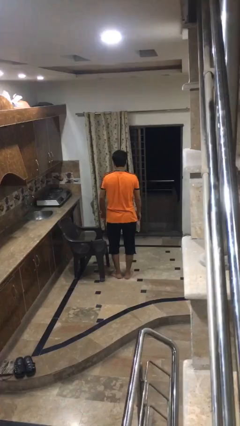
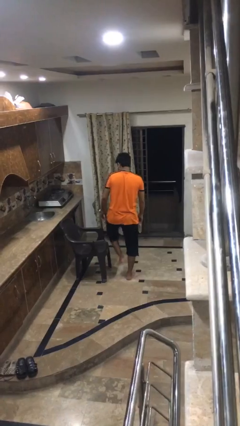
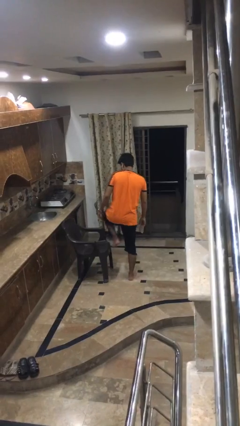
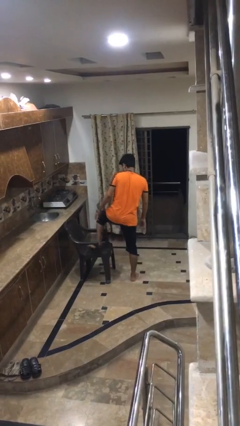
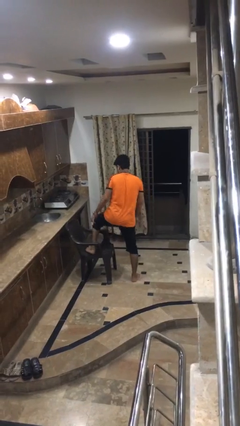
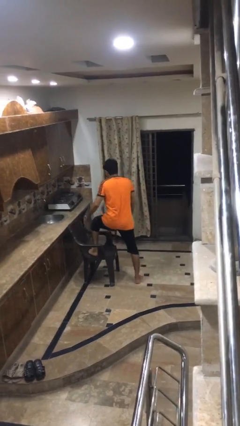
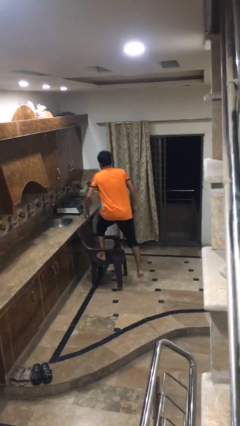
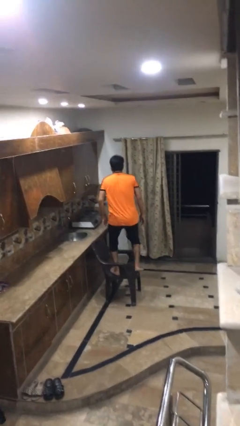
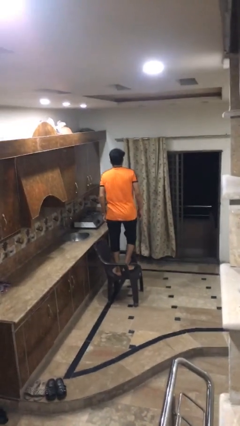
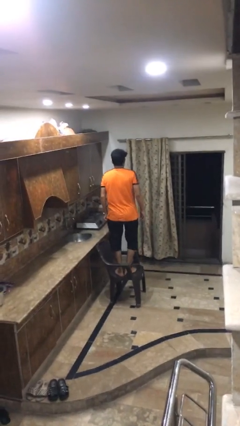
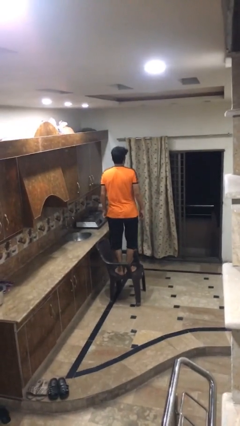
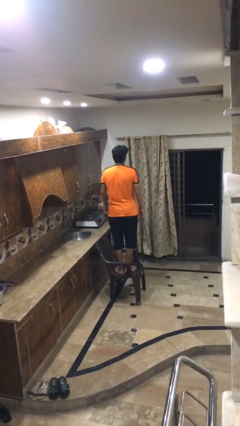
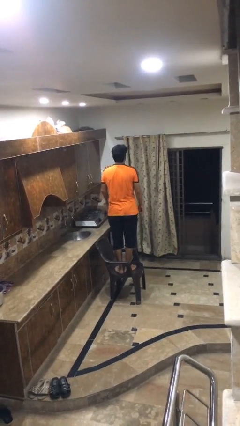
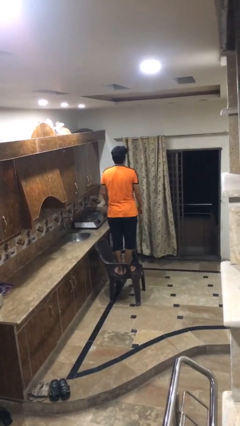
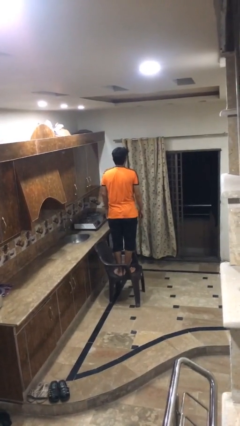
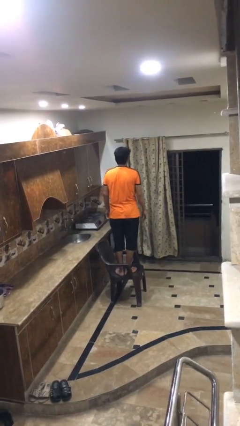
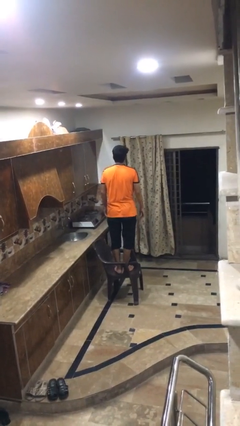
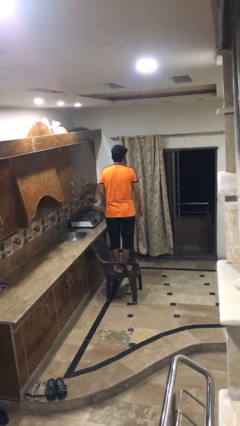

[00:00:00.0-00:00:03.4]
person climbs on chair

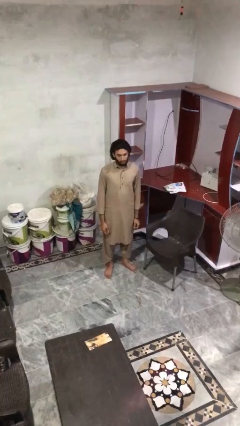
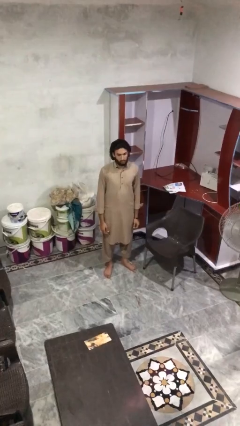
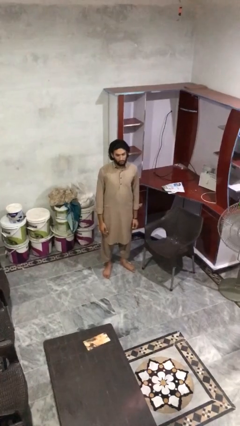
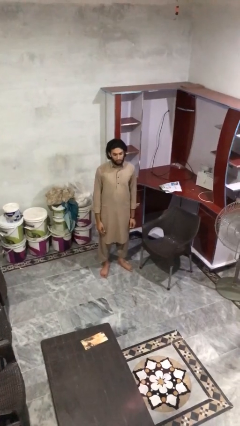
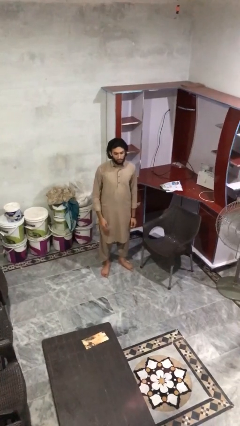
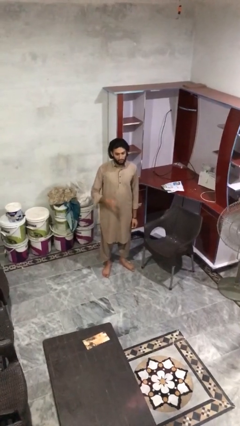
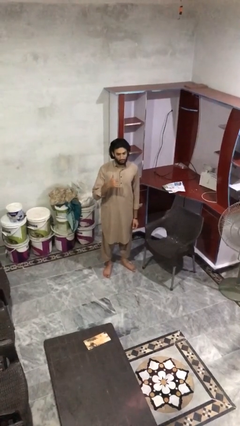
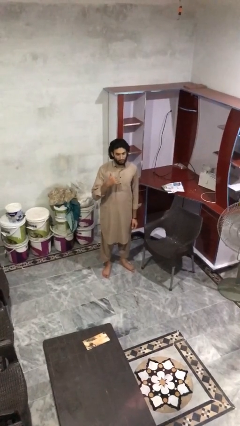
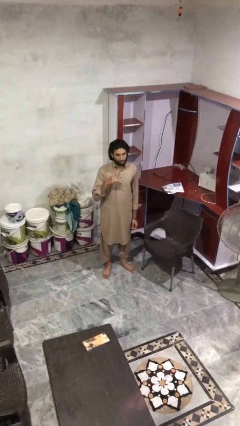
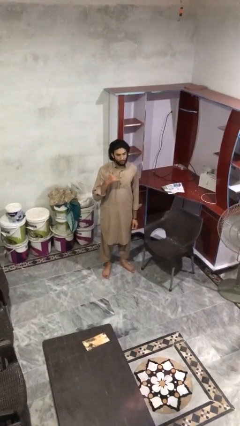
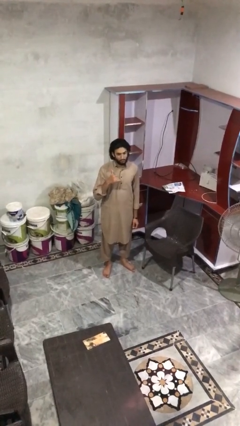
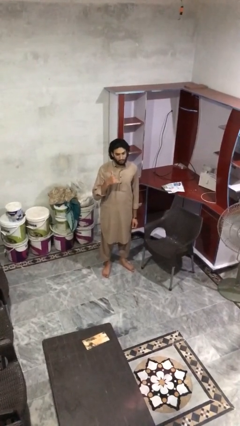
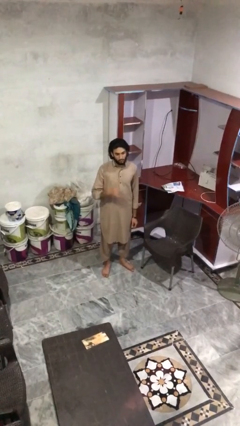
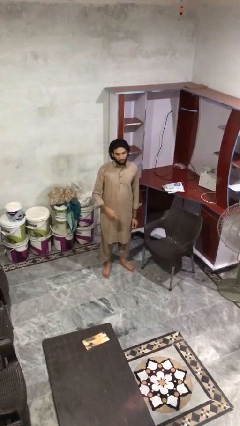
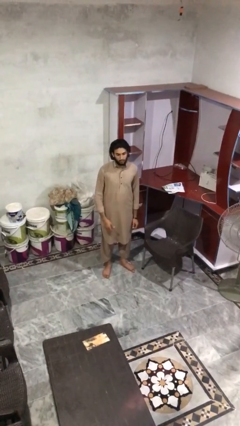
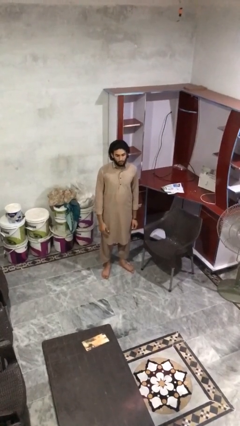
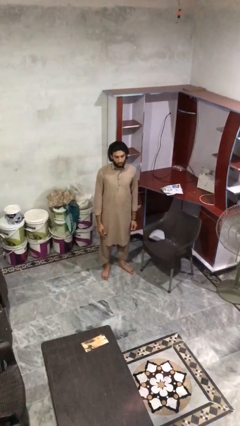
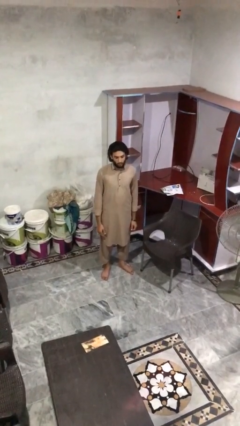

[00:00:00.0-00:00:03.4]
person gestures hang loose

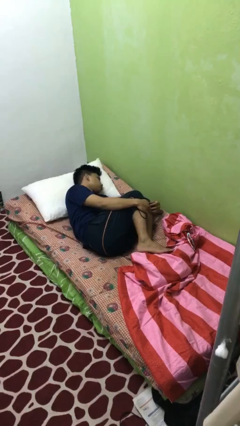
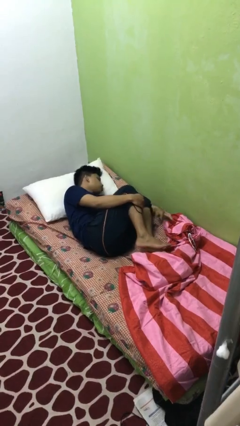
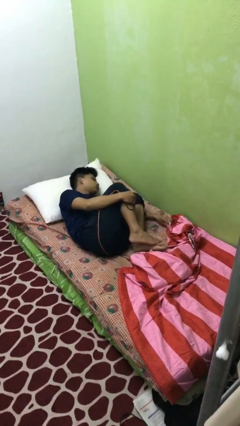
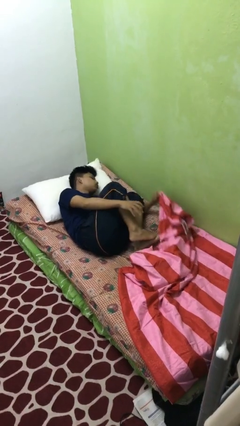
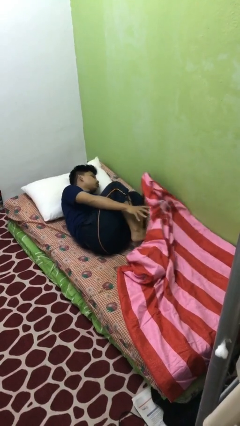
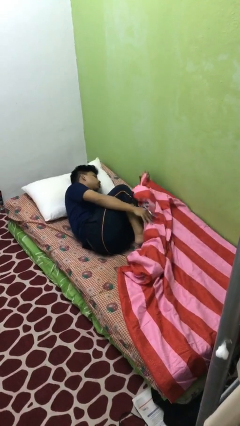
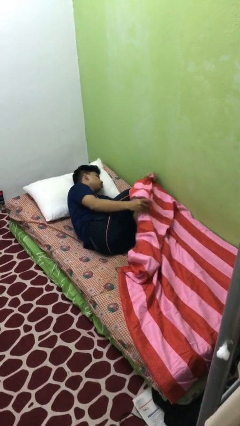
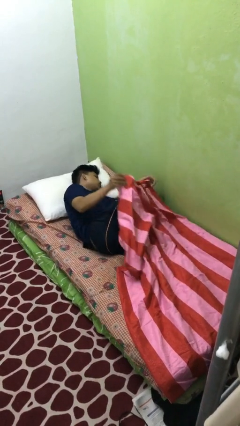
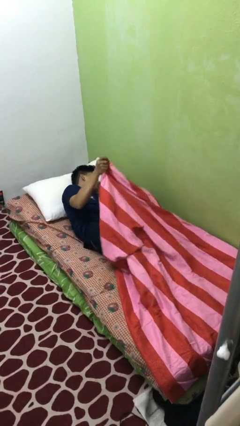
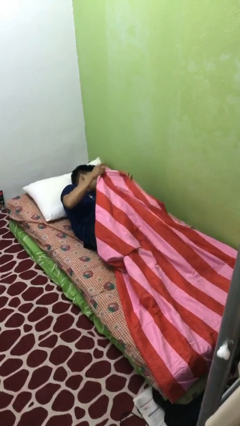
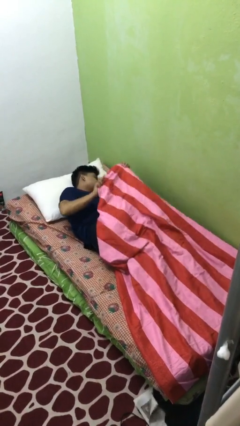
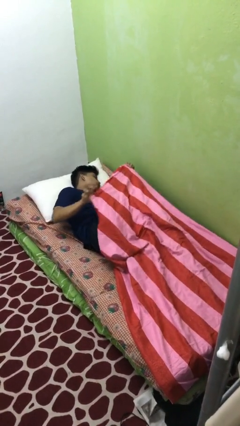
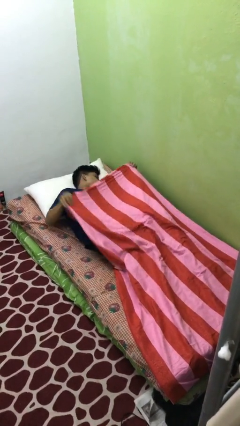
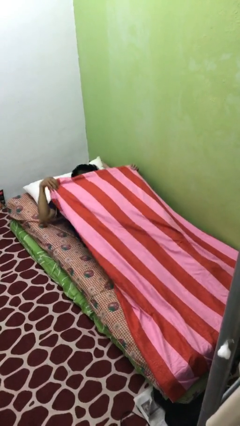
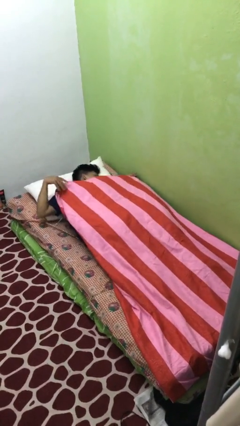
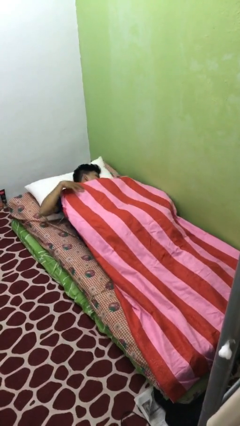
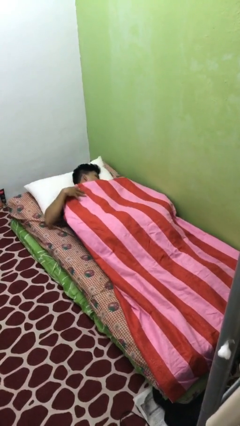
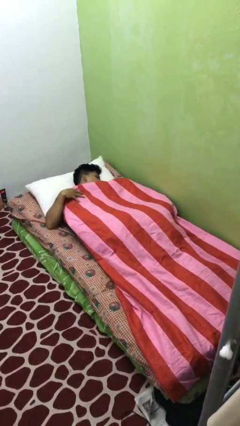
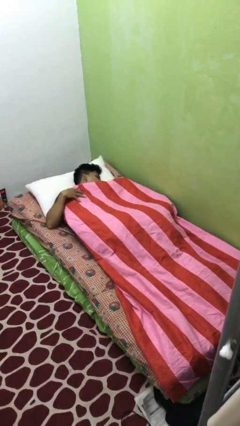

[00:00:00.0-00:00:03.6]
person covers with bedsheets

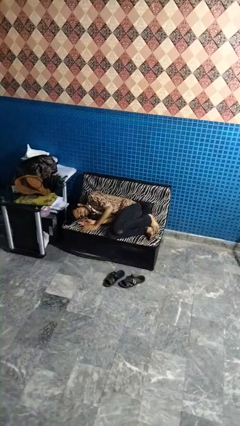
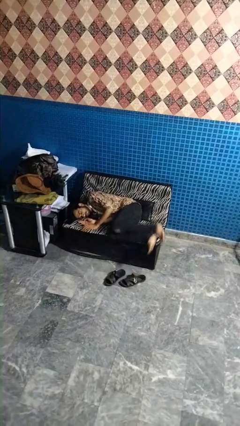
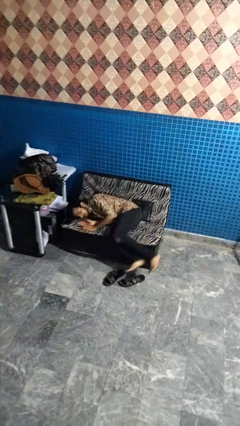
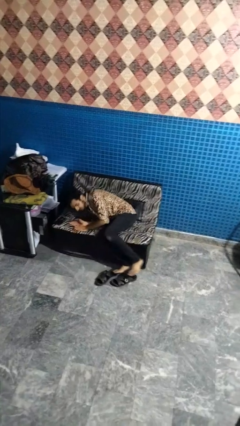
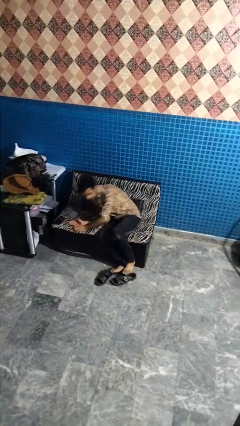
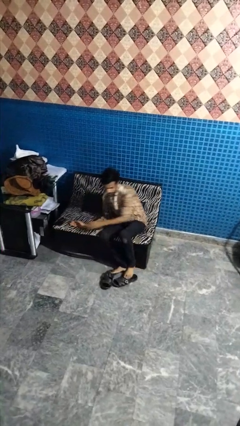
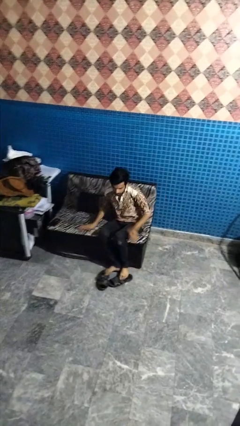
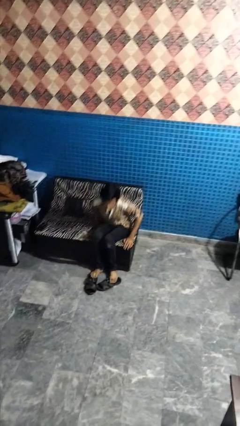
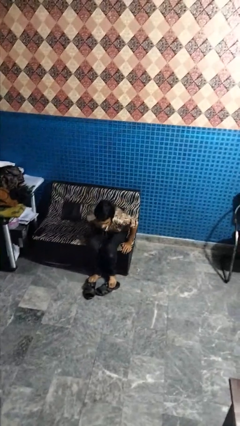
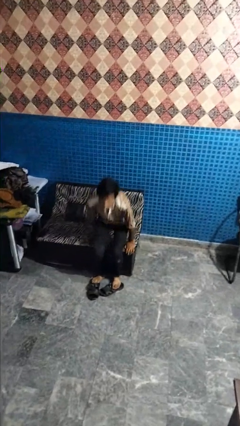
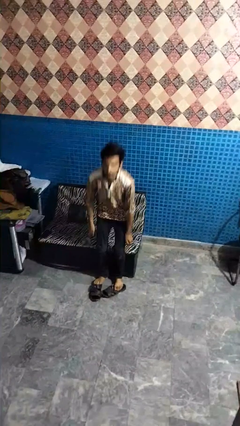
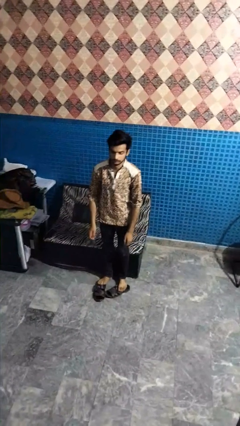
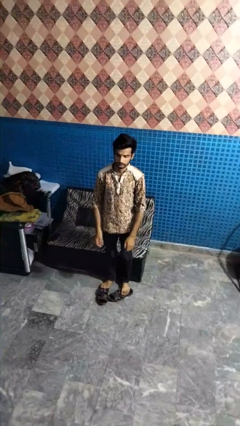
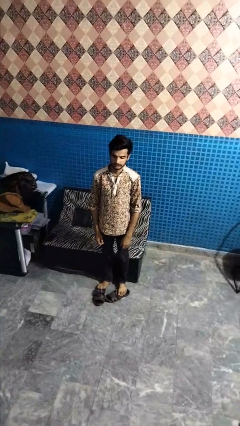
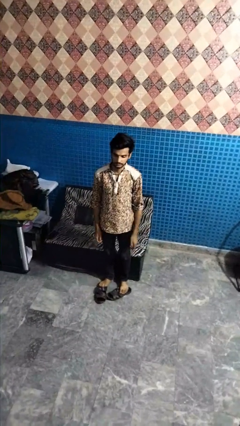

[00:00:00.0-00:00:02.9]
person stands up

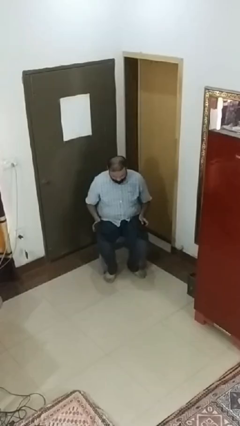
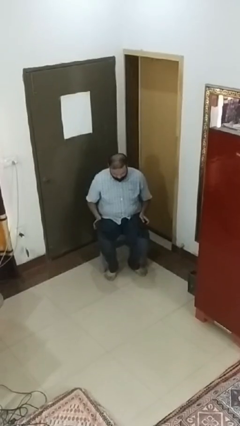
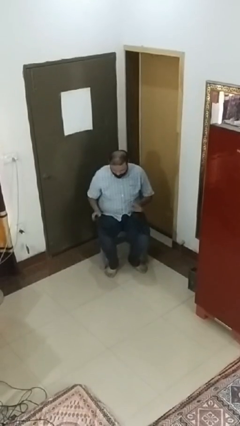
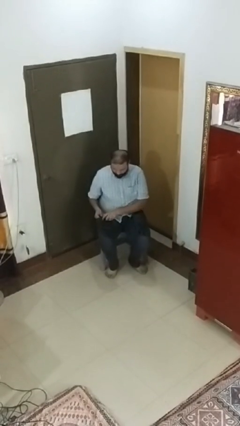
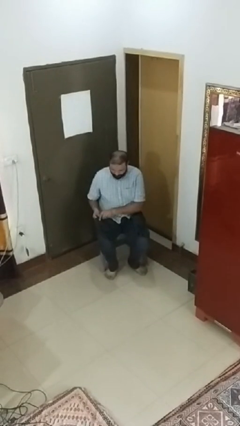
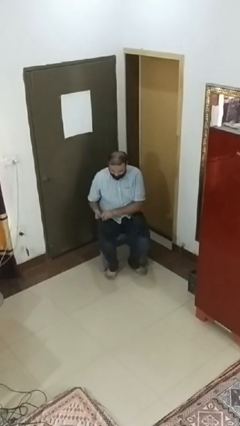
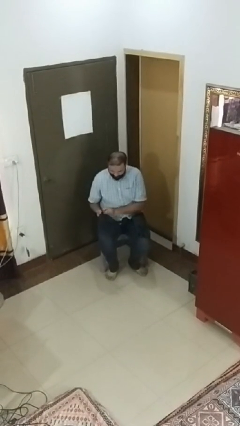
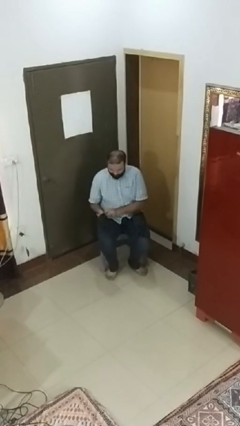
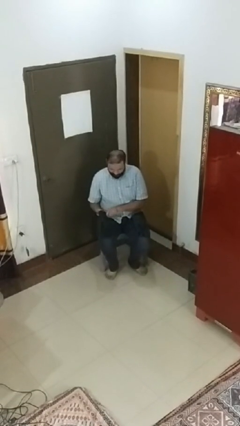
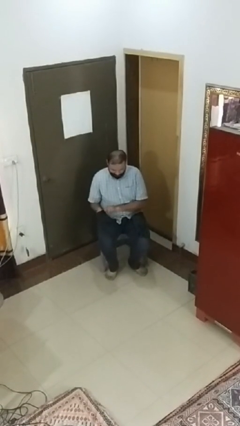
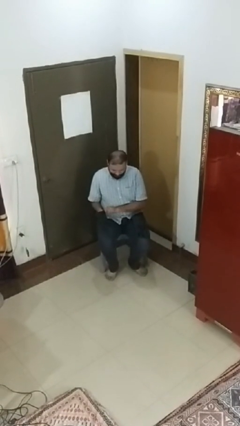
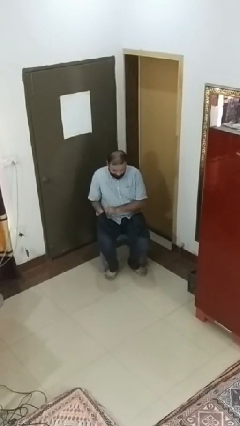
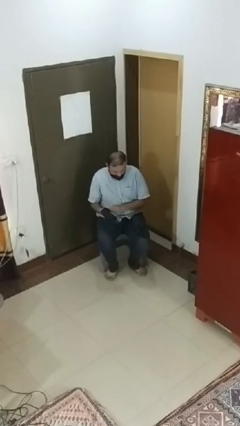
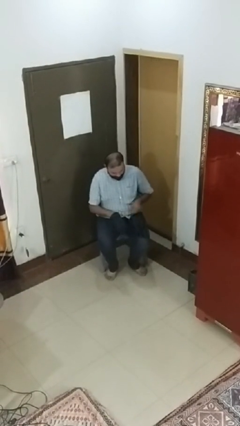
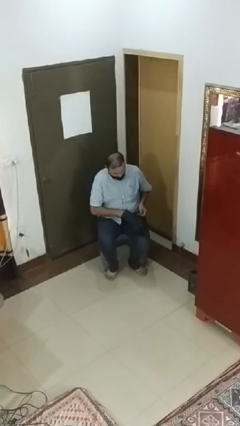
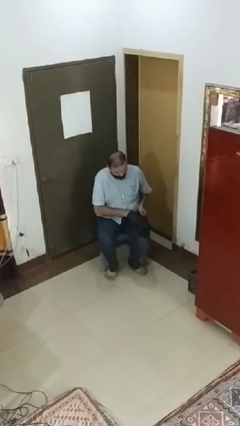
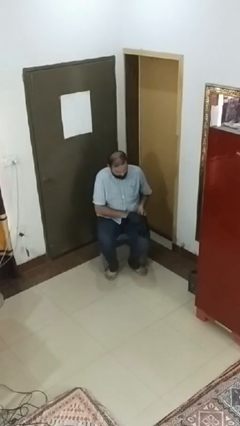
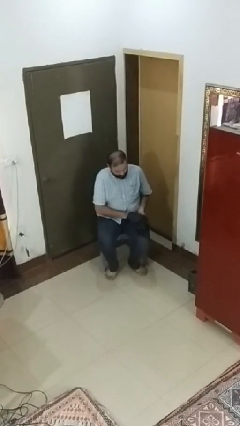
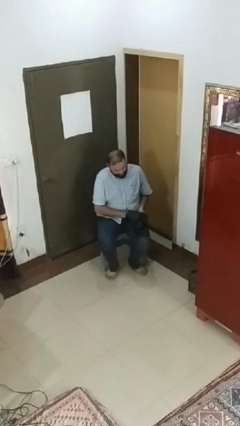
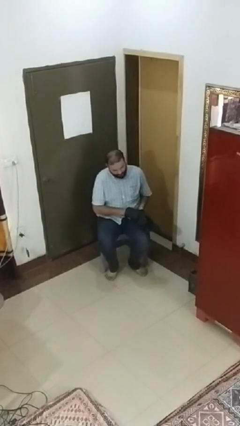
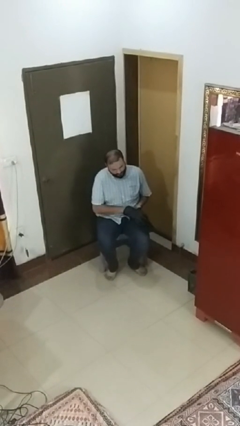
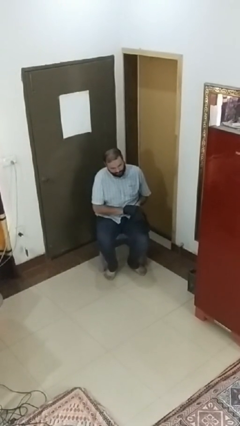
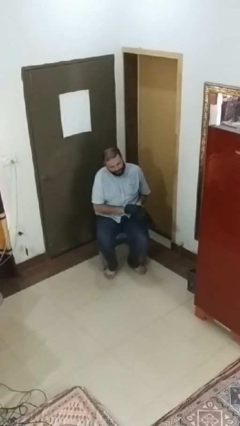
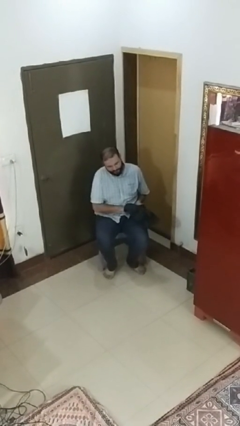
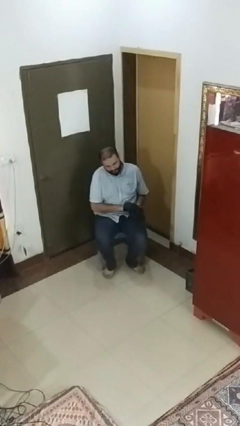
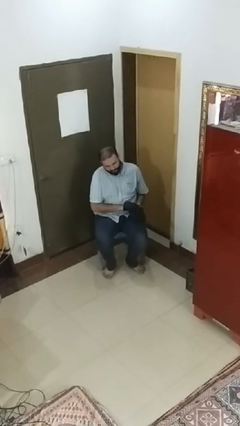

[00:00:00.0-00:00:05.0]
person puts on gloves
